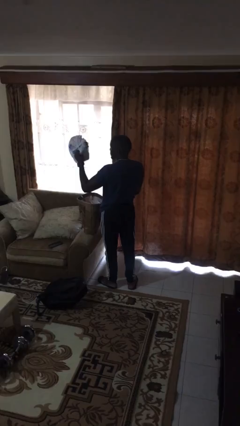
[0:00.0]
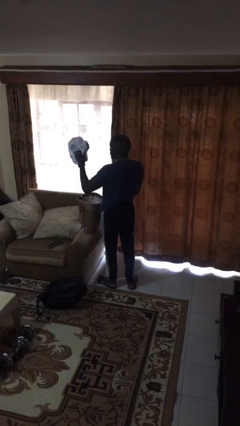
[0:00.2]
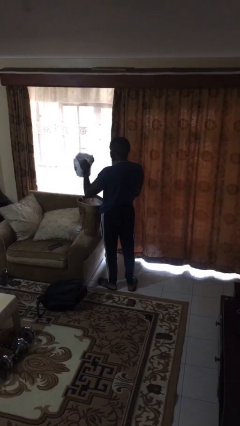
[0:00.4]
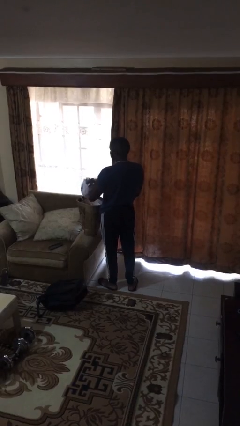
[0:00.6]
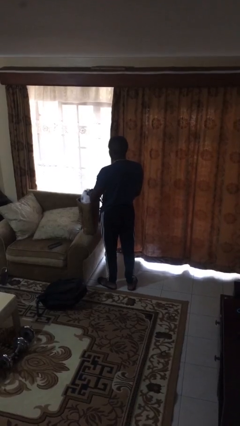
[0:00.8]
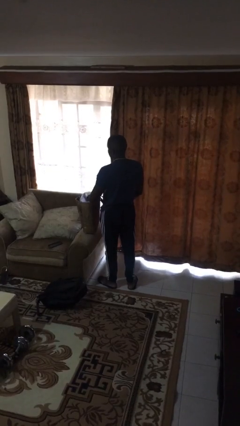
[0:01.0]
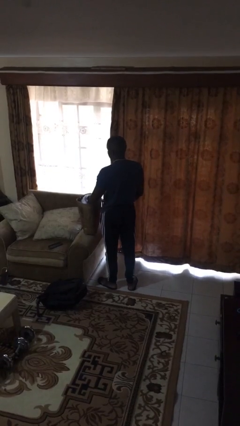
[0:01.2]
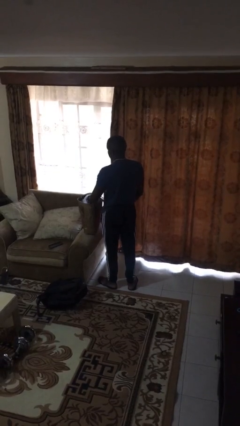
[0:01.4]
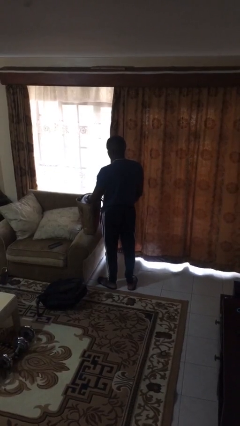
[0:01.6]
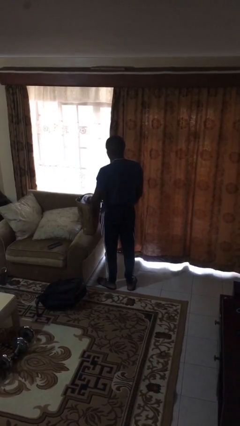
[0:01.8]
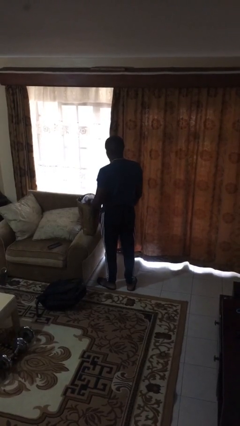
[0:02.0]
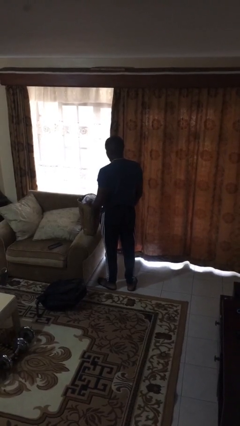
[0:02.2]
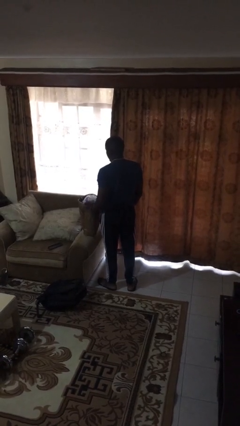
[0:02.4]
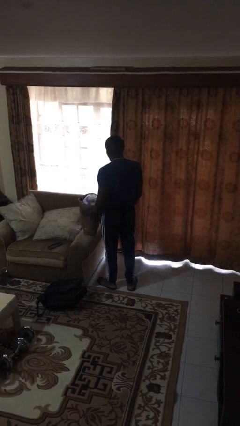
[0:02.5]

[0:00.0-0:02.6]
person puts object into bag

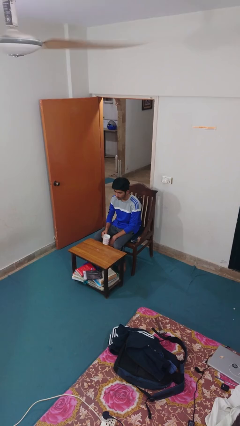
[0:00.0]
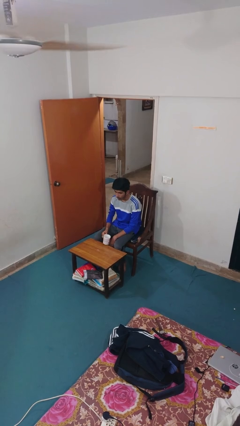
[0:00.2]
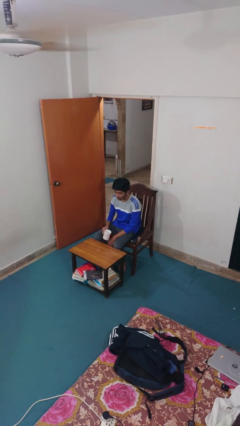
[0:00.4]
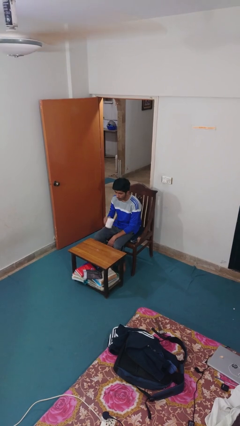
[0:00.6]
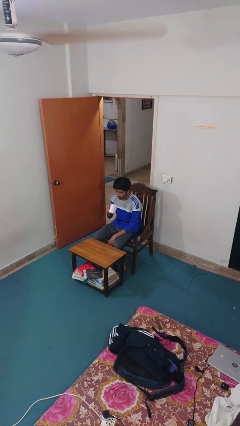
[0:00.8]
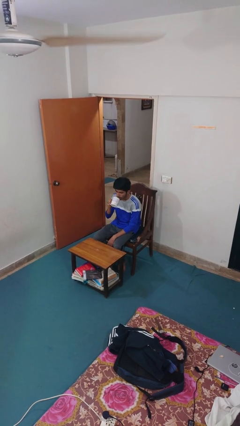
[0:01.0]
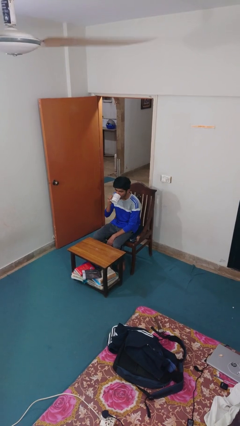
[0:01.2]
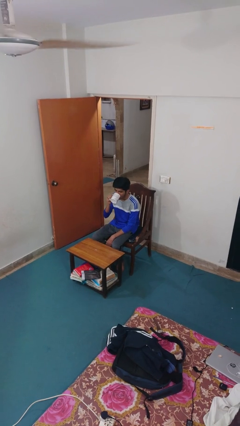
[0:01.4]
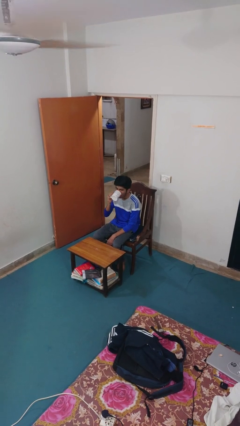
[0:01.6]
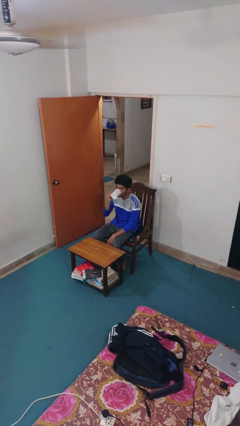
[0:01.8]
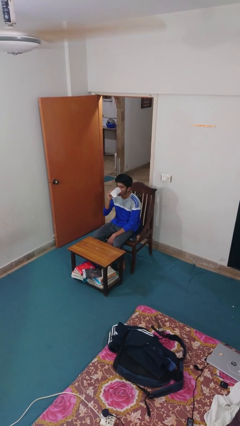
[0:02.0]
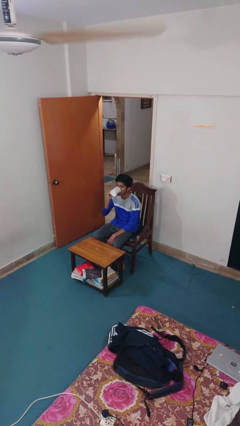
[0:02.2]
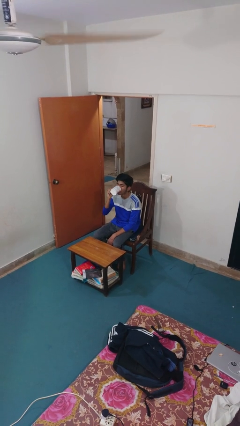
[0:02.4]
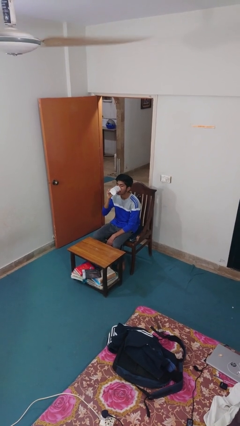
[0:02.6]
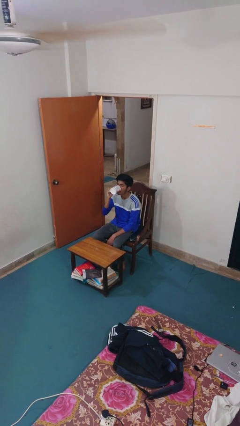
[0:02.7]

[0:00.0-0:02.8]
person drinks from mug

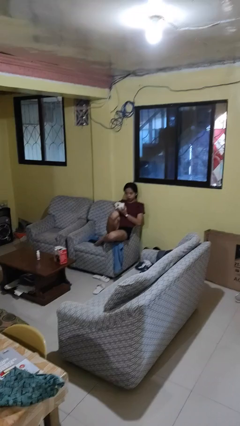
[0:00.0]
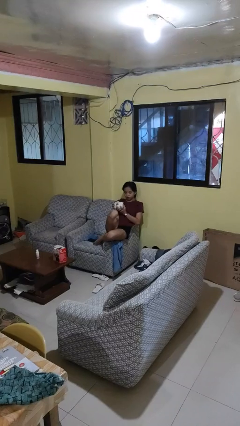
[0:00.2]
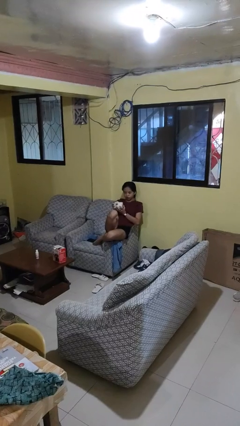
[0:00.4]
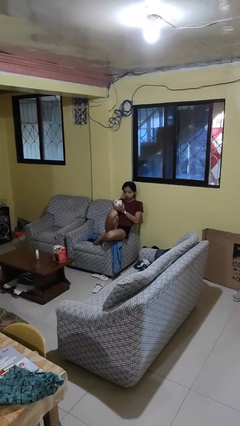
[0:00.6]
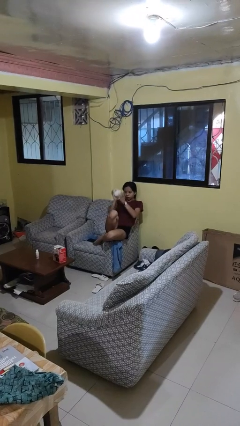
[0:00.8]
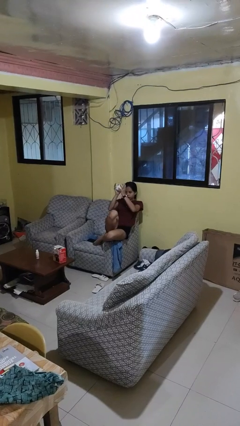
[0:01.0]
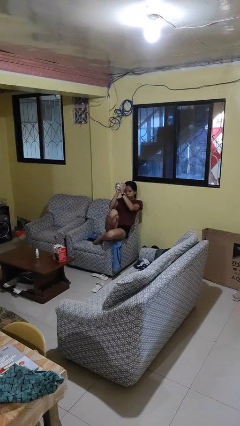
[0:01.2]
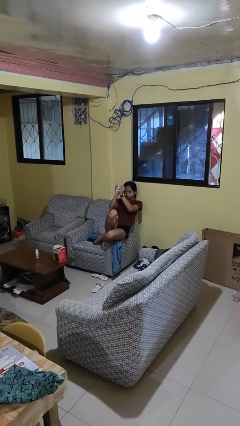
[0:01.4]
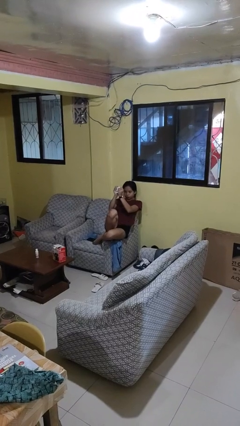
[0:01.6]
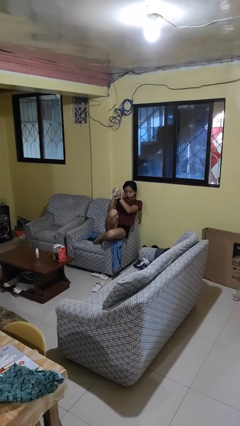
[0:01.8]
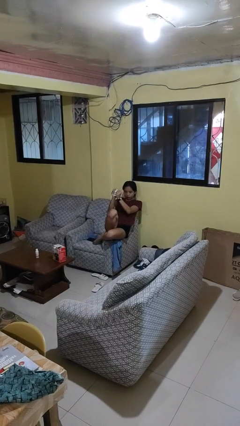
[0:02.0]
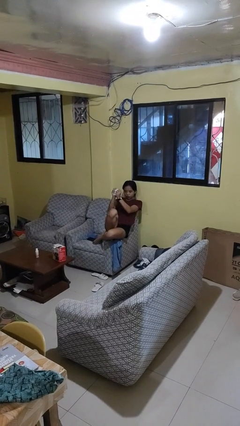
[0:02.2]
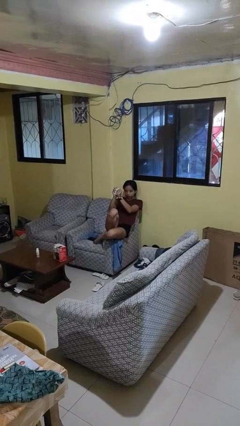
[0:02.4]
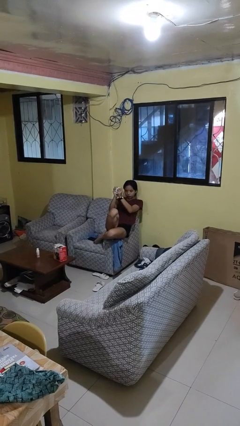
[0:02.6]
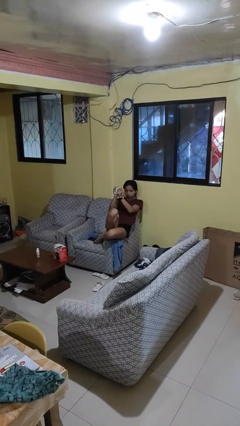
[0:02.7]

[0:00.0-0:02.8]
person squeezes object

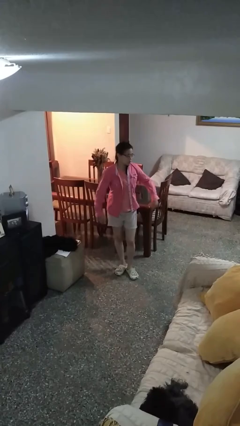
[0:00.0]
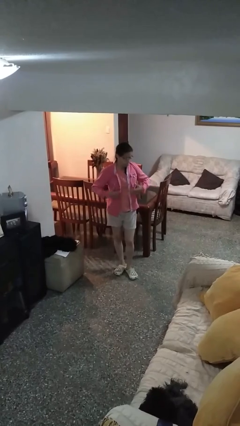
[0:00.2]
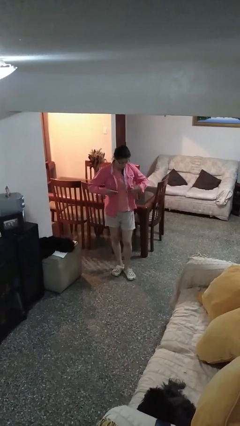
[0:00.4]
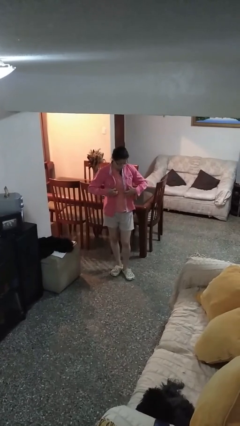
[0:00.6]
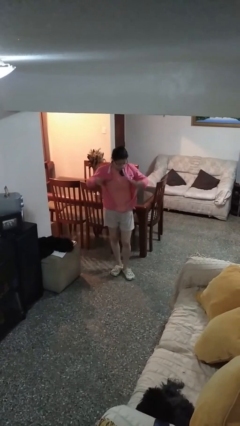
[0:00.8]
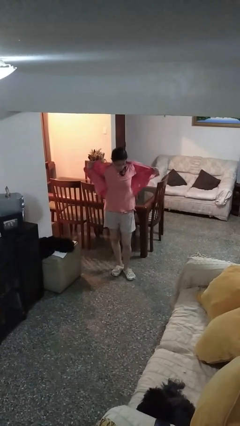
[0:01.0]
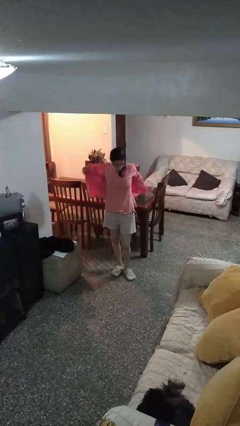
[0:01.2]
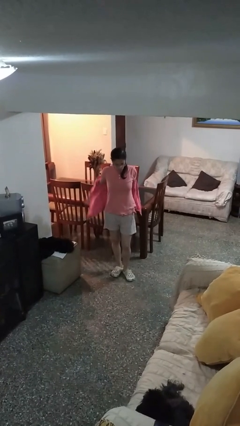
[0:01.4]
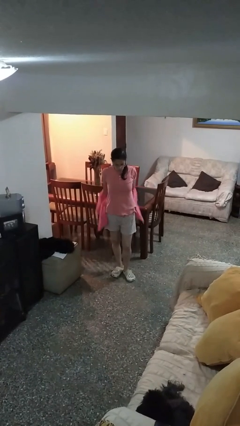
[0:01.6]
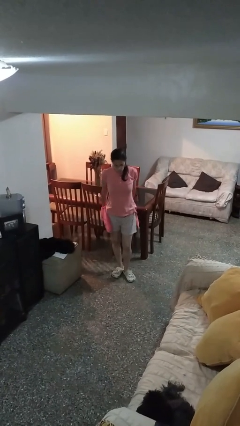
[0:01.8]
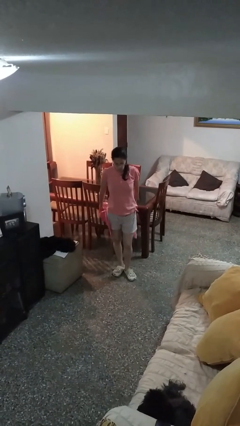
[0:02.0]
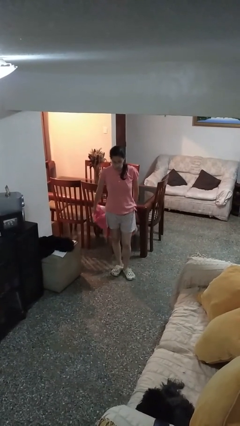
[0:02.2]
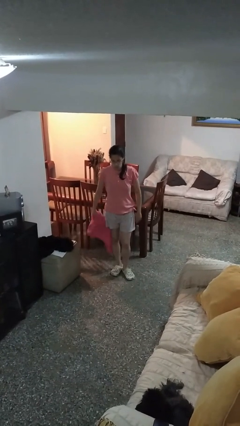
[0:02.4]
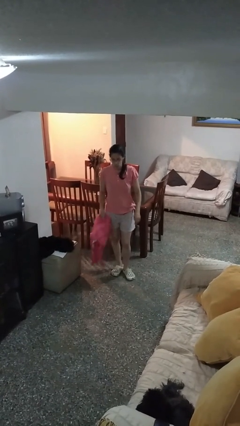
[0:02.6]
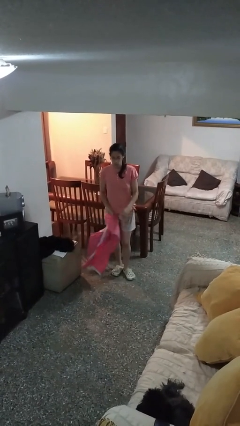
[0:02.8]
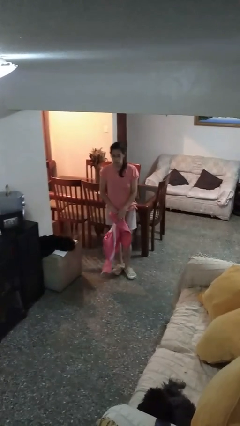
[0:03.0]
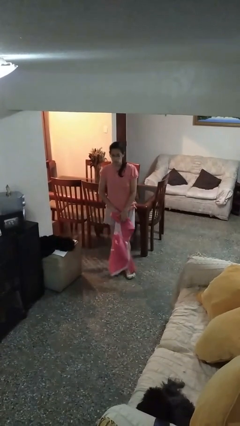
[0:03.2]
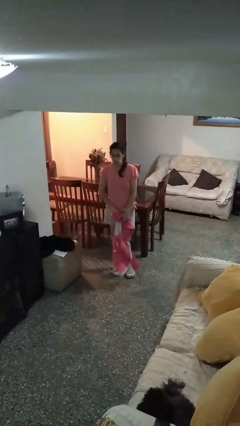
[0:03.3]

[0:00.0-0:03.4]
person takes off shirt

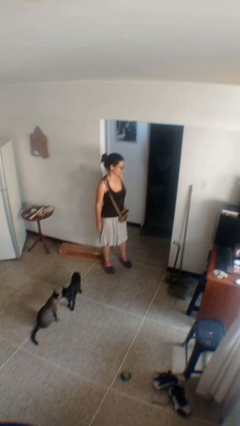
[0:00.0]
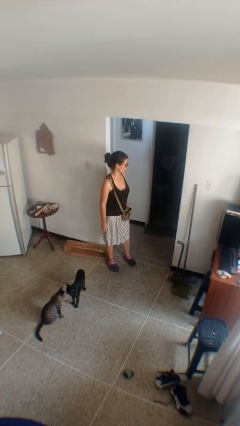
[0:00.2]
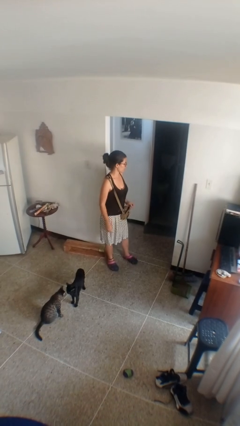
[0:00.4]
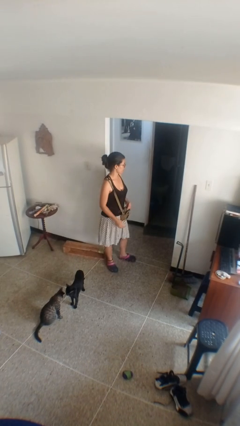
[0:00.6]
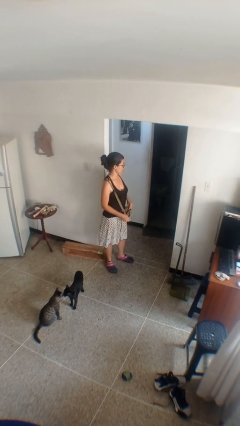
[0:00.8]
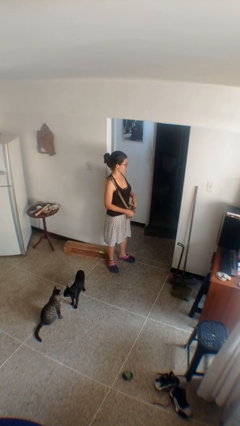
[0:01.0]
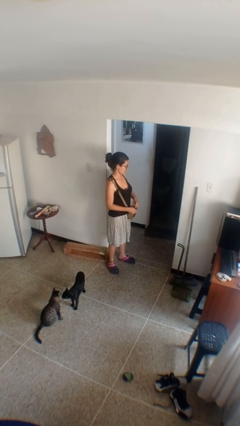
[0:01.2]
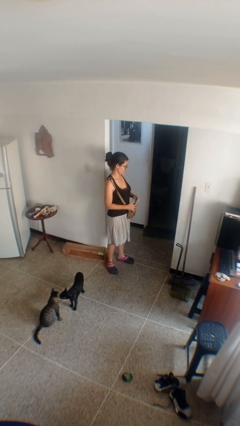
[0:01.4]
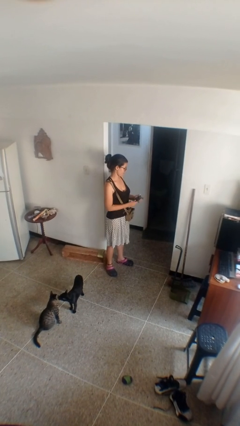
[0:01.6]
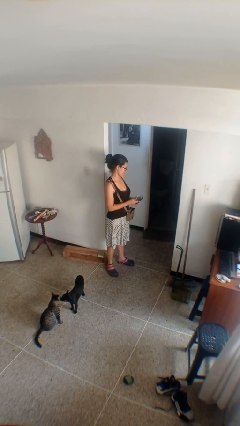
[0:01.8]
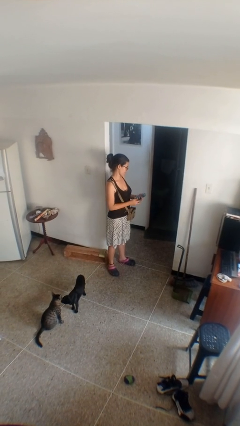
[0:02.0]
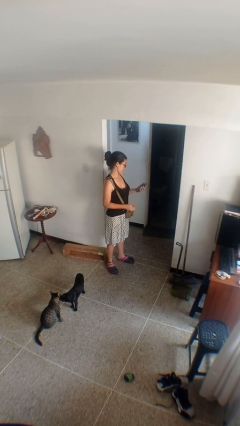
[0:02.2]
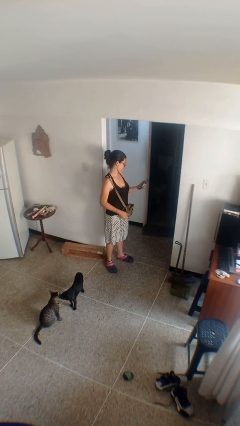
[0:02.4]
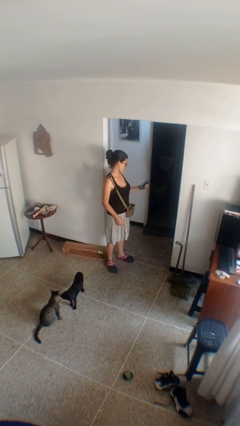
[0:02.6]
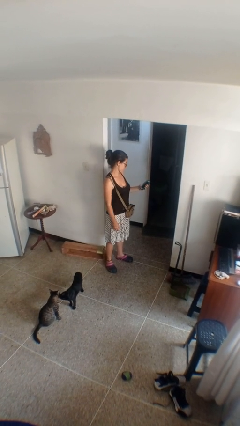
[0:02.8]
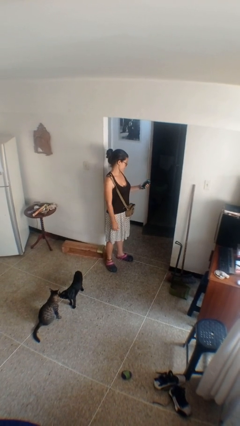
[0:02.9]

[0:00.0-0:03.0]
person takes phone from pocket

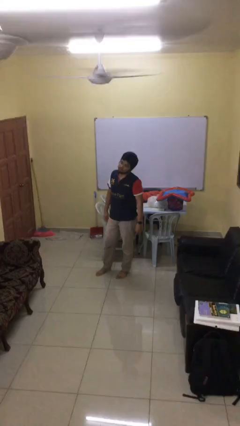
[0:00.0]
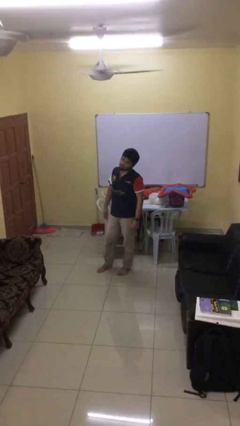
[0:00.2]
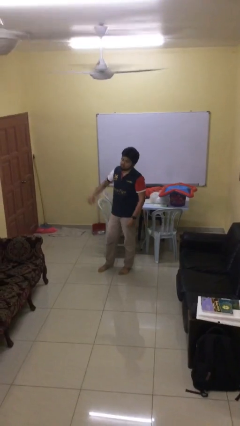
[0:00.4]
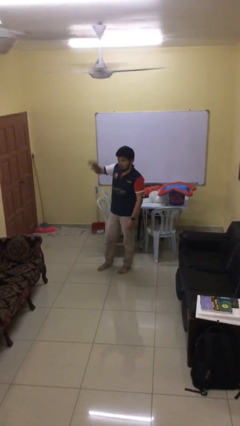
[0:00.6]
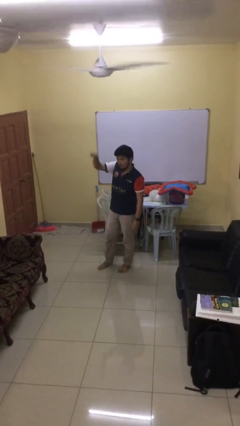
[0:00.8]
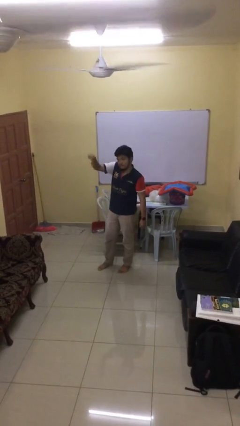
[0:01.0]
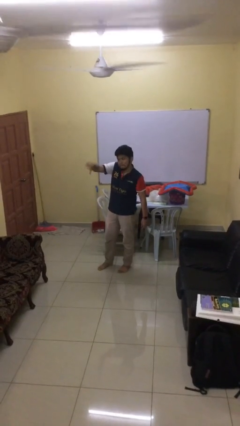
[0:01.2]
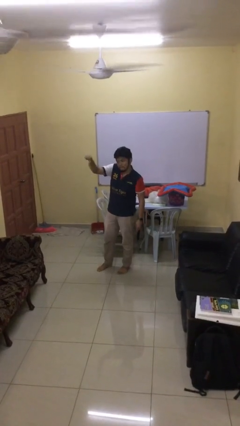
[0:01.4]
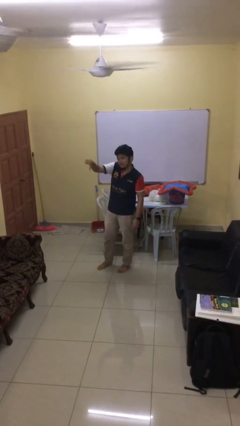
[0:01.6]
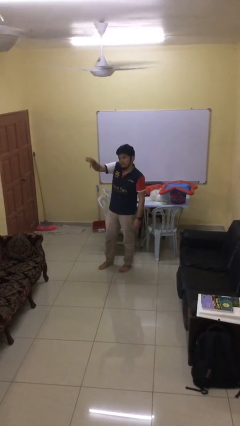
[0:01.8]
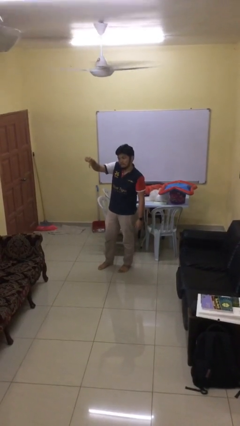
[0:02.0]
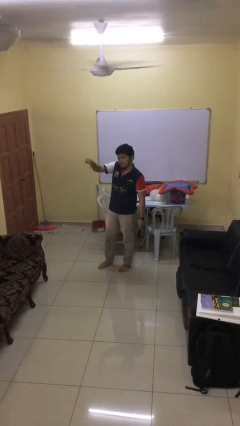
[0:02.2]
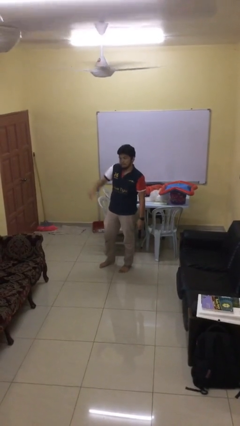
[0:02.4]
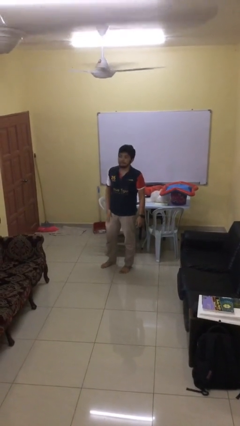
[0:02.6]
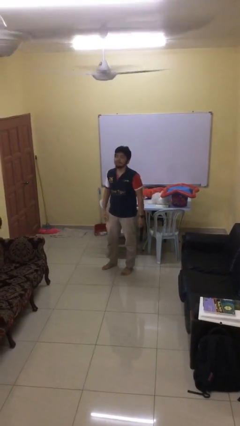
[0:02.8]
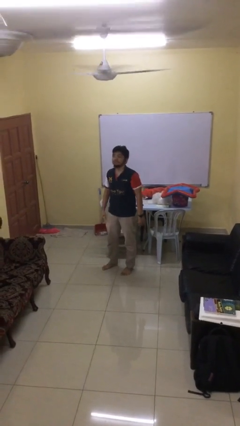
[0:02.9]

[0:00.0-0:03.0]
person gestures thumbs down
